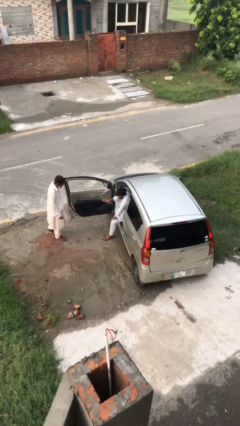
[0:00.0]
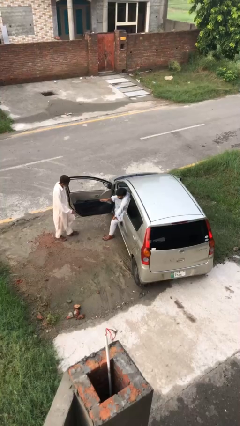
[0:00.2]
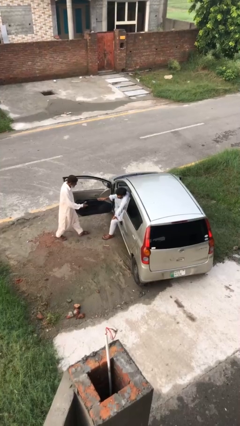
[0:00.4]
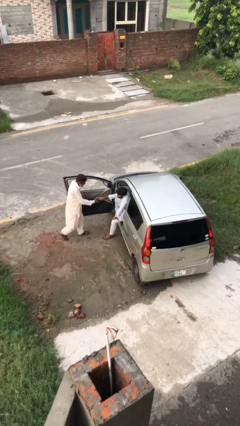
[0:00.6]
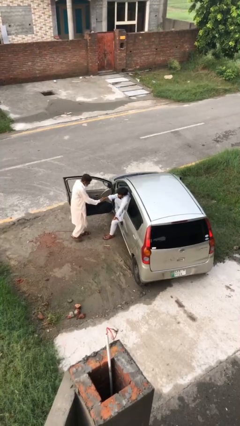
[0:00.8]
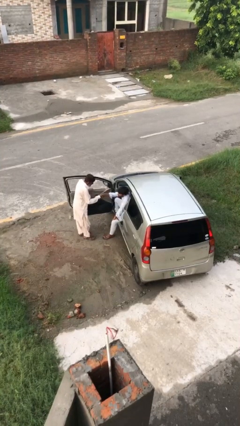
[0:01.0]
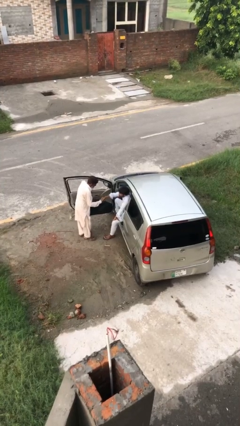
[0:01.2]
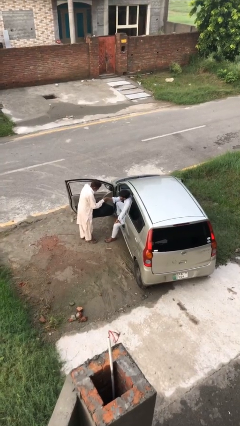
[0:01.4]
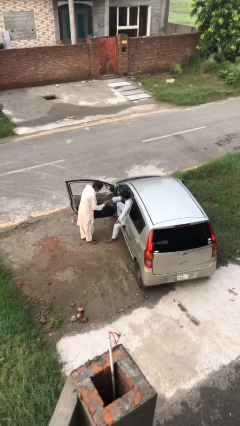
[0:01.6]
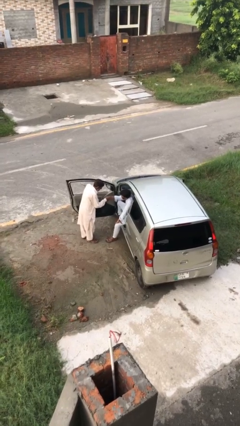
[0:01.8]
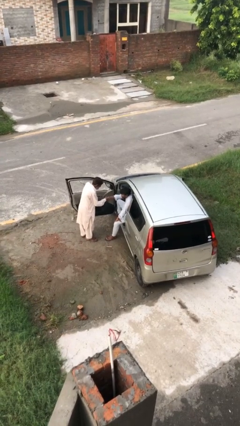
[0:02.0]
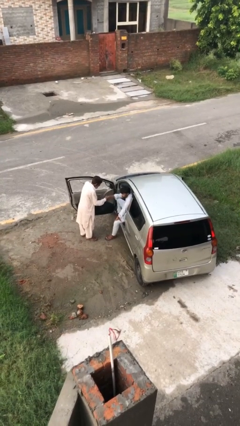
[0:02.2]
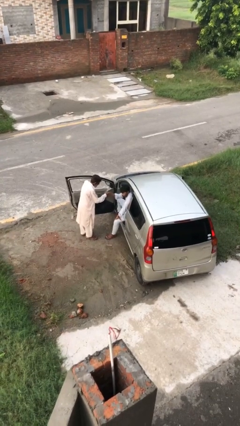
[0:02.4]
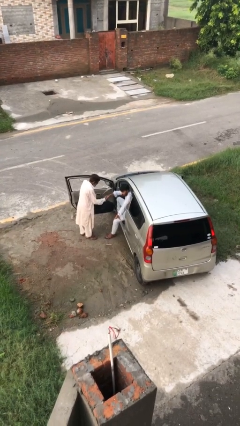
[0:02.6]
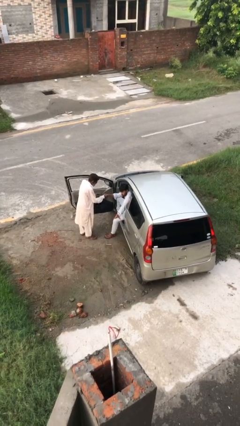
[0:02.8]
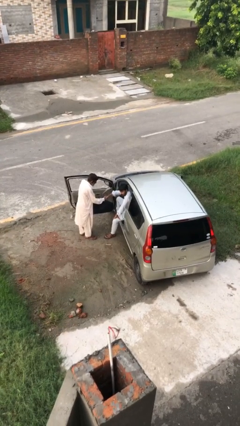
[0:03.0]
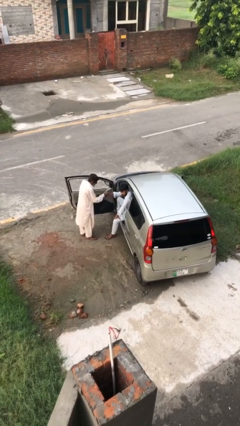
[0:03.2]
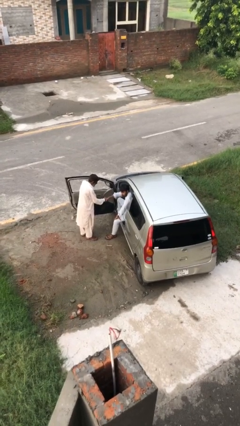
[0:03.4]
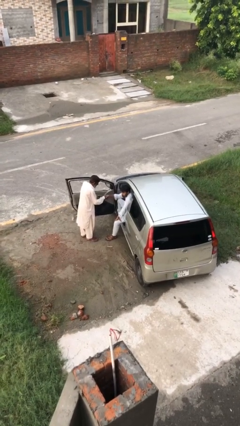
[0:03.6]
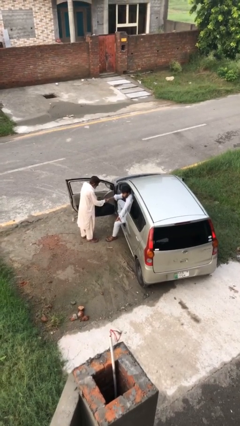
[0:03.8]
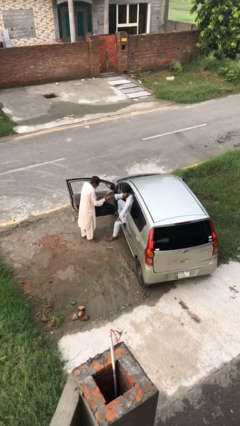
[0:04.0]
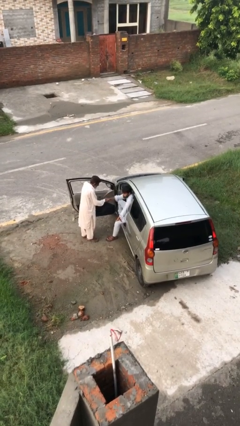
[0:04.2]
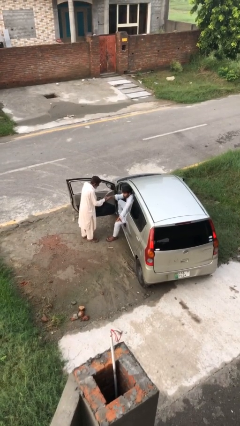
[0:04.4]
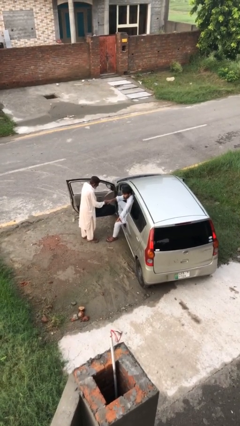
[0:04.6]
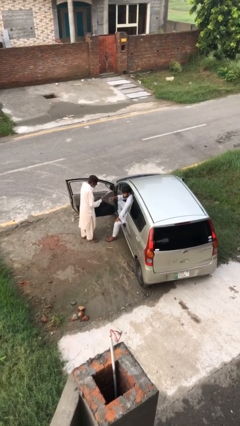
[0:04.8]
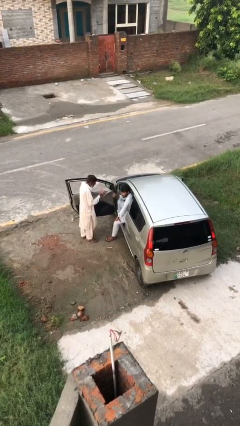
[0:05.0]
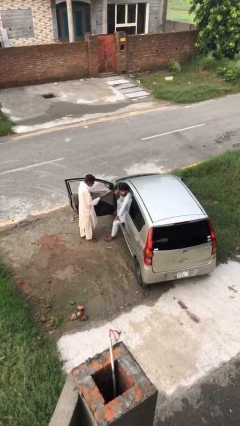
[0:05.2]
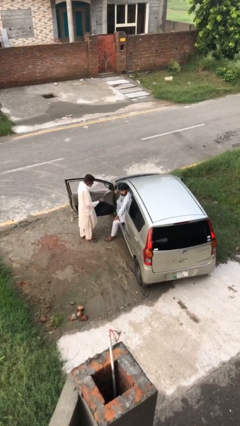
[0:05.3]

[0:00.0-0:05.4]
person shakes hand

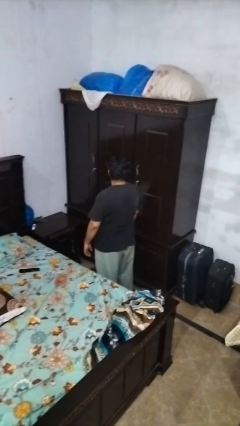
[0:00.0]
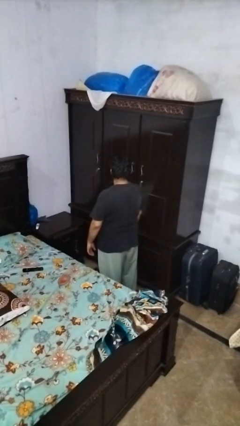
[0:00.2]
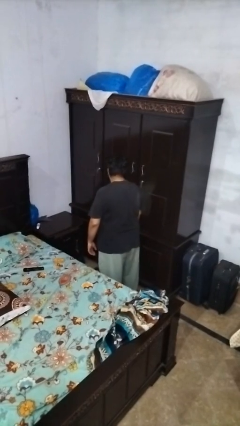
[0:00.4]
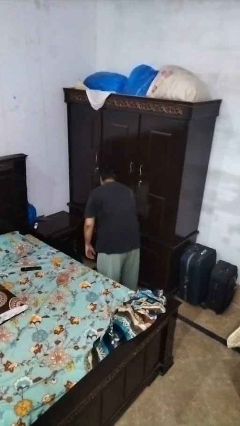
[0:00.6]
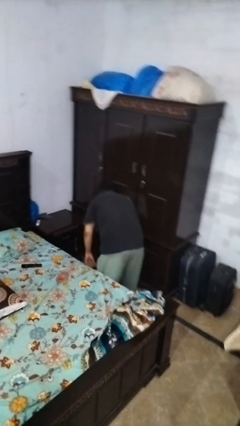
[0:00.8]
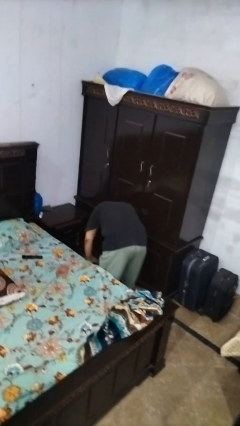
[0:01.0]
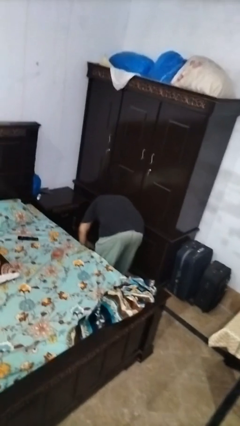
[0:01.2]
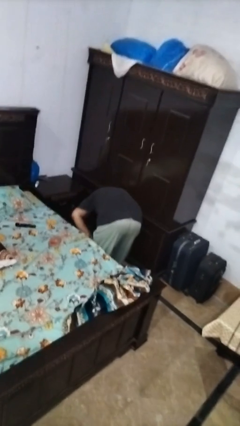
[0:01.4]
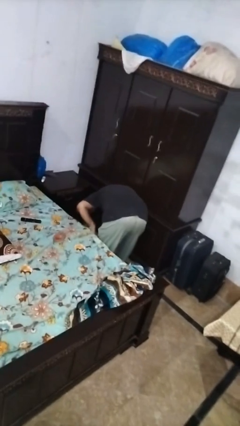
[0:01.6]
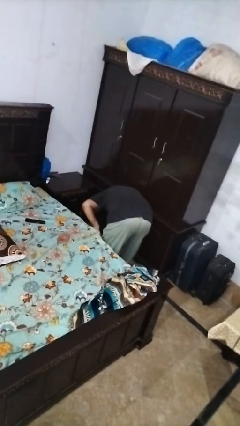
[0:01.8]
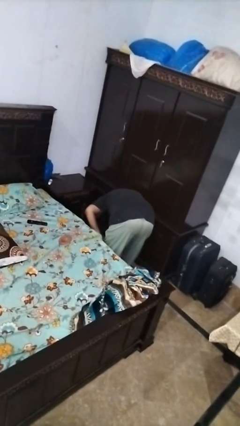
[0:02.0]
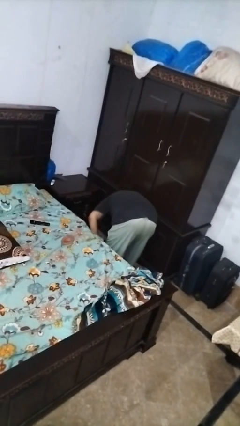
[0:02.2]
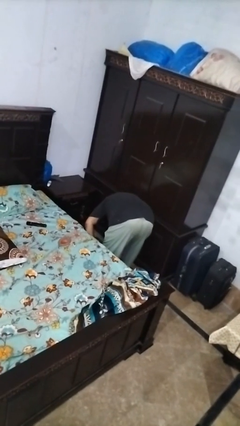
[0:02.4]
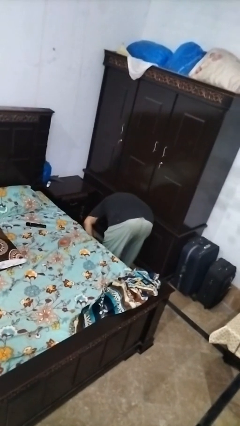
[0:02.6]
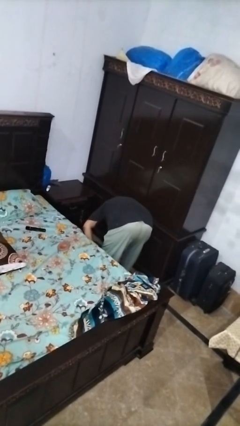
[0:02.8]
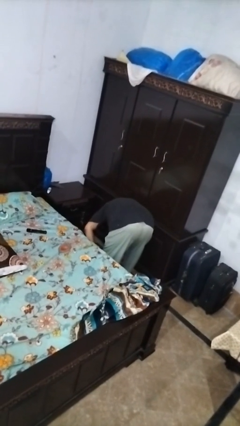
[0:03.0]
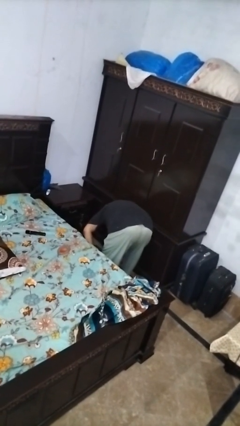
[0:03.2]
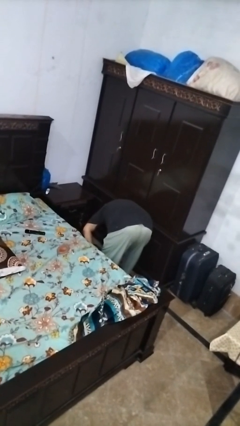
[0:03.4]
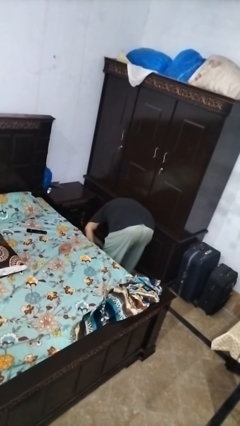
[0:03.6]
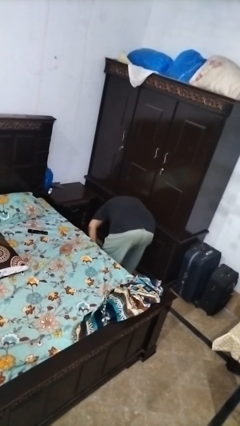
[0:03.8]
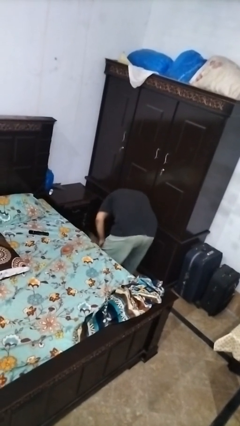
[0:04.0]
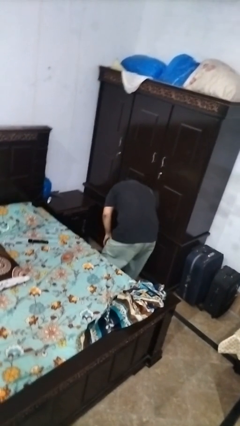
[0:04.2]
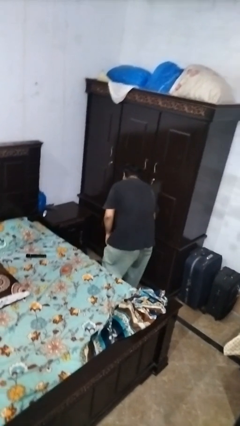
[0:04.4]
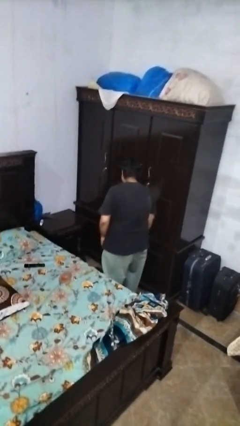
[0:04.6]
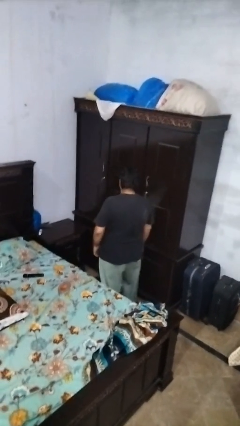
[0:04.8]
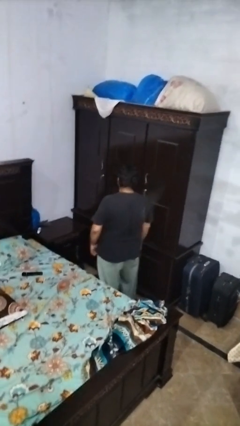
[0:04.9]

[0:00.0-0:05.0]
person searches under bed

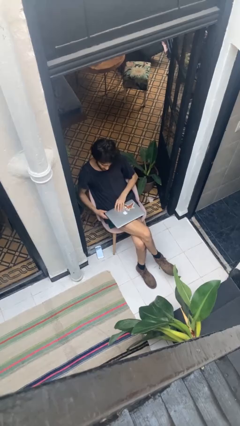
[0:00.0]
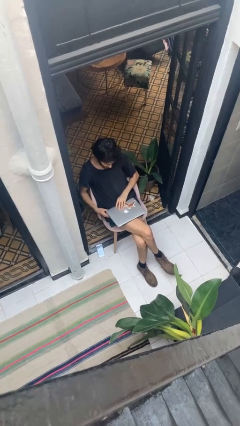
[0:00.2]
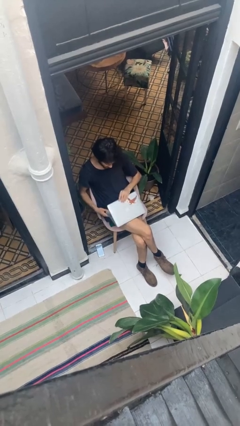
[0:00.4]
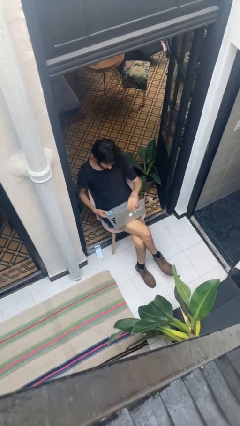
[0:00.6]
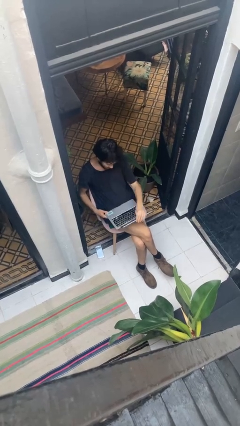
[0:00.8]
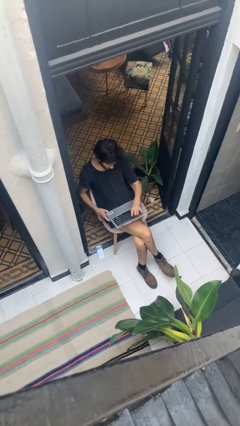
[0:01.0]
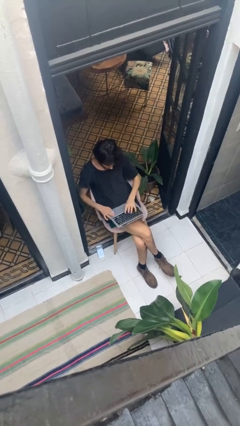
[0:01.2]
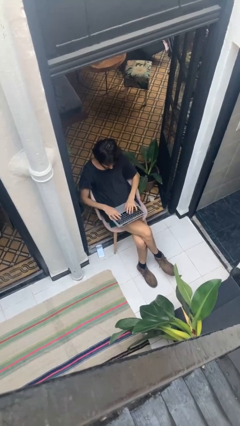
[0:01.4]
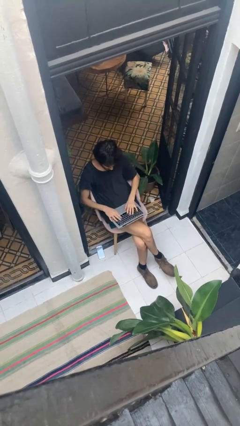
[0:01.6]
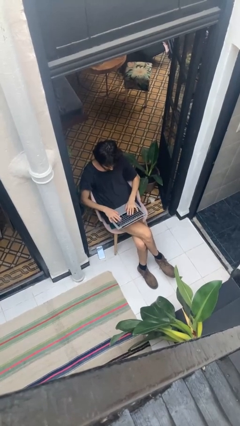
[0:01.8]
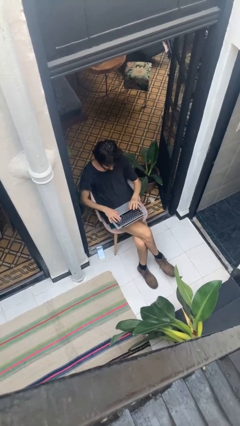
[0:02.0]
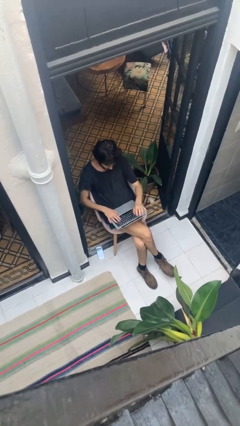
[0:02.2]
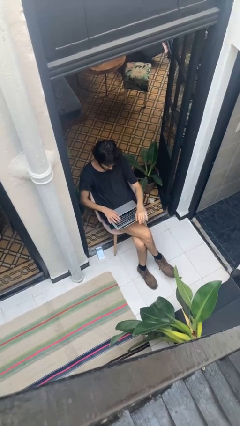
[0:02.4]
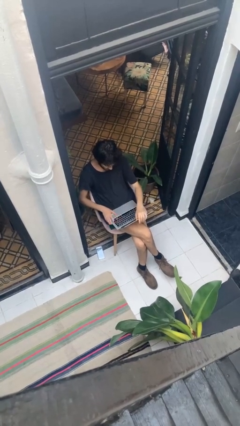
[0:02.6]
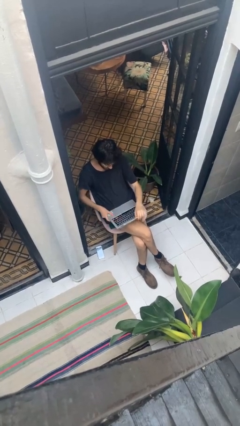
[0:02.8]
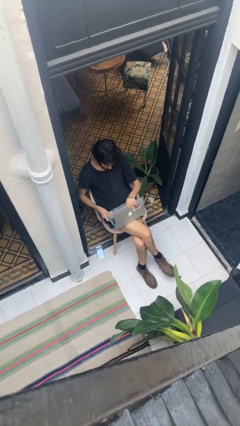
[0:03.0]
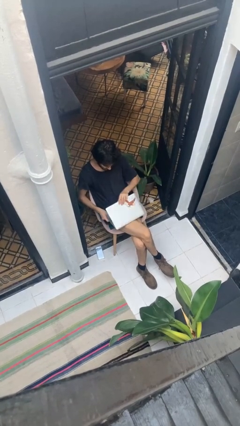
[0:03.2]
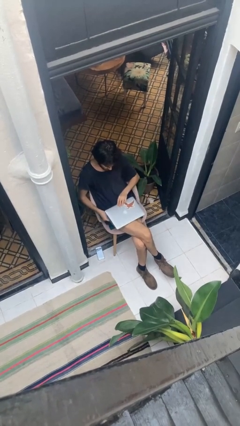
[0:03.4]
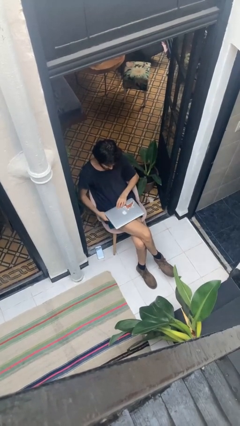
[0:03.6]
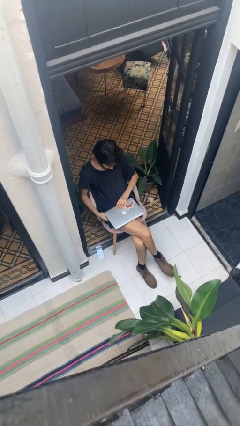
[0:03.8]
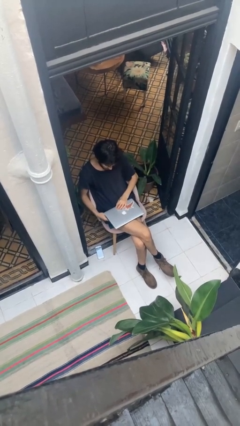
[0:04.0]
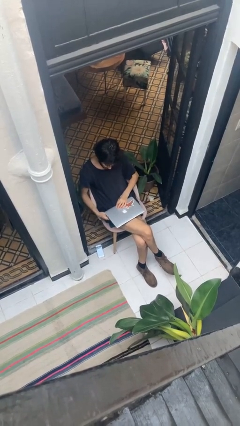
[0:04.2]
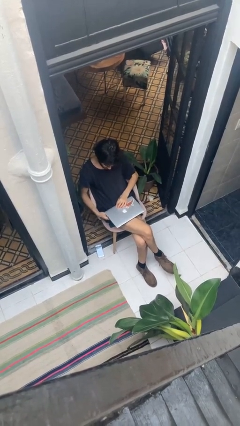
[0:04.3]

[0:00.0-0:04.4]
person interacts with laptop

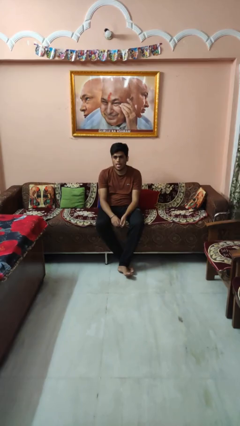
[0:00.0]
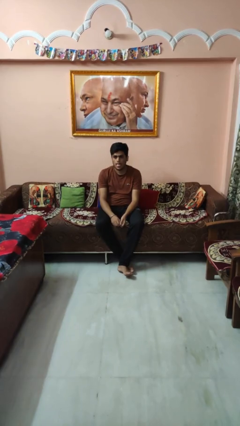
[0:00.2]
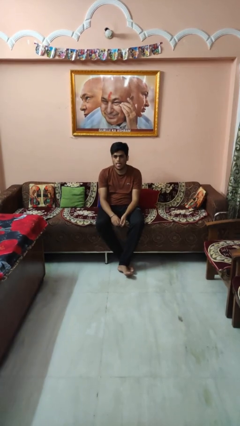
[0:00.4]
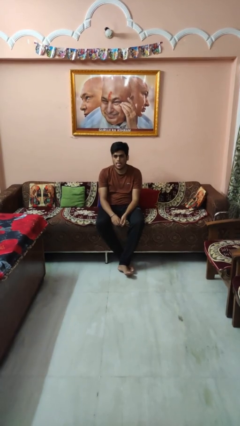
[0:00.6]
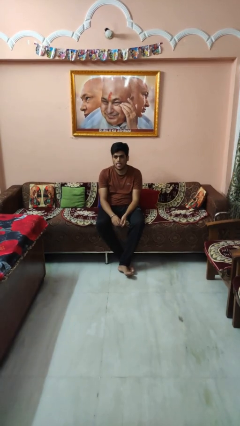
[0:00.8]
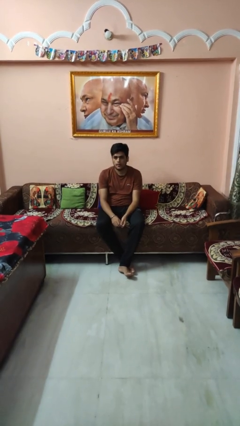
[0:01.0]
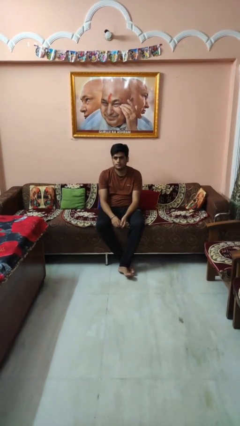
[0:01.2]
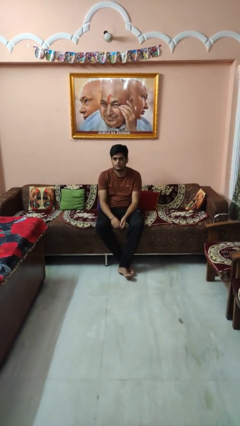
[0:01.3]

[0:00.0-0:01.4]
person sticks out tongue

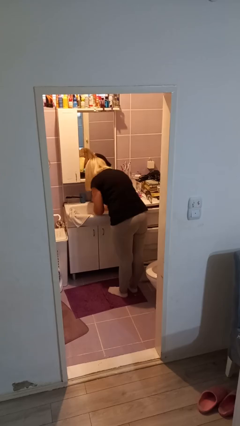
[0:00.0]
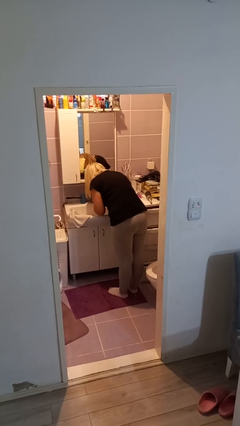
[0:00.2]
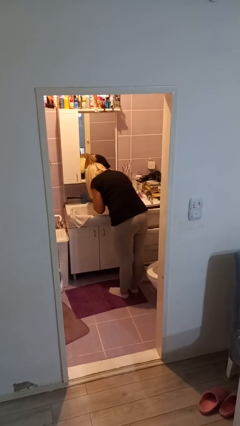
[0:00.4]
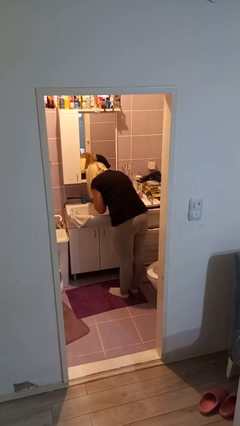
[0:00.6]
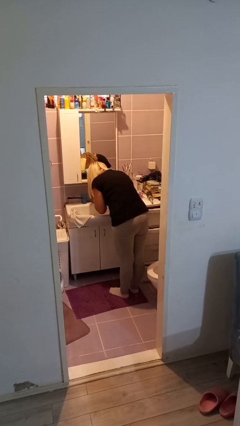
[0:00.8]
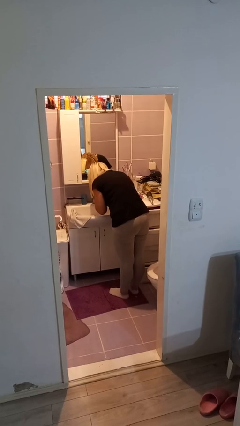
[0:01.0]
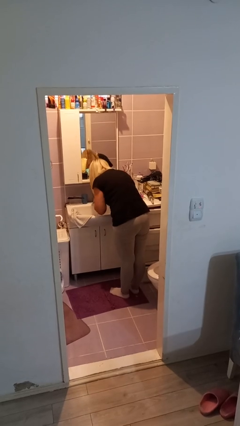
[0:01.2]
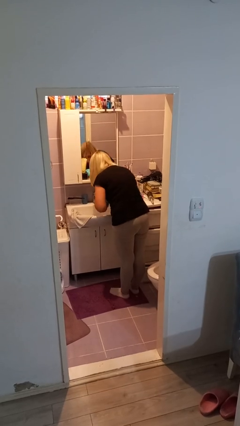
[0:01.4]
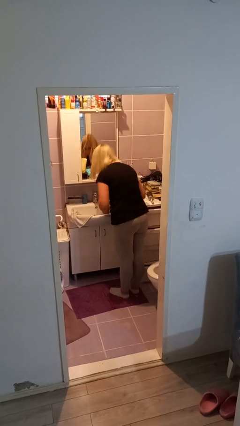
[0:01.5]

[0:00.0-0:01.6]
person washes face
